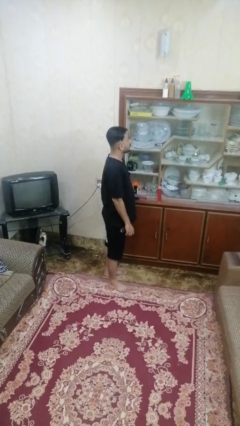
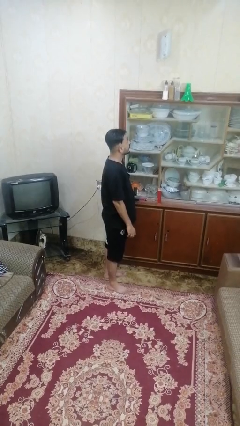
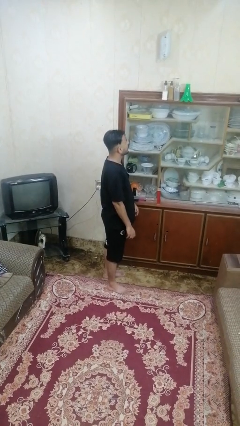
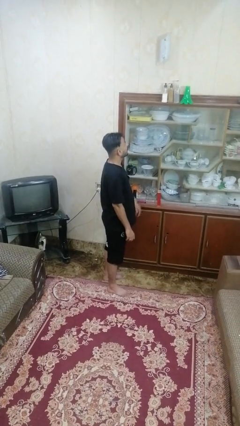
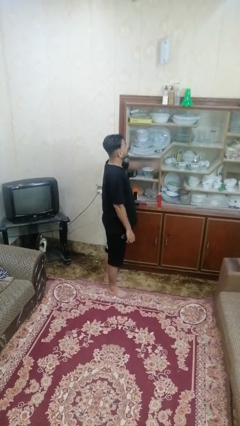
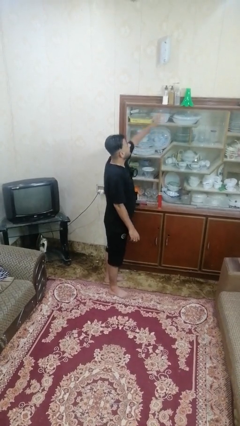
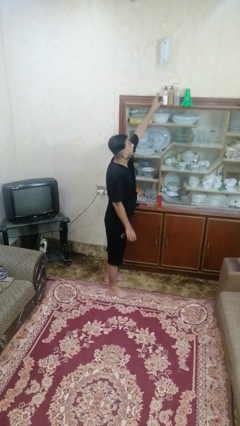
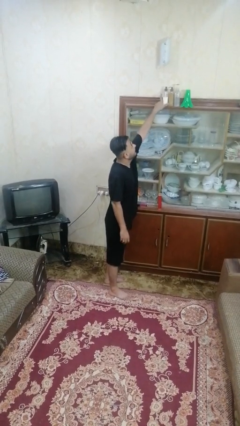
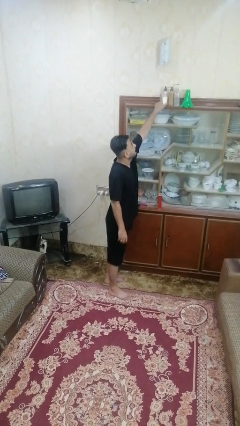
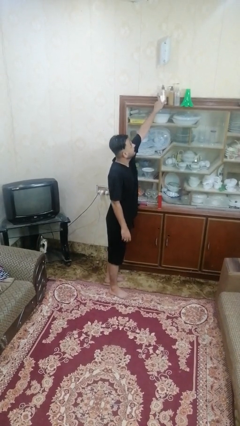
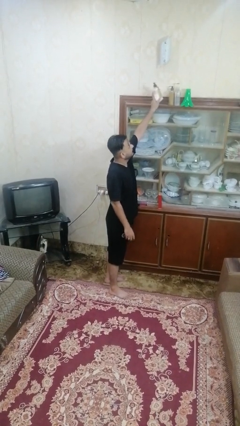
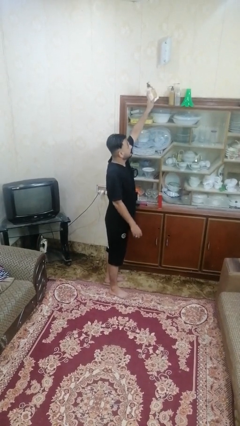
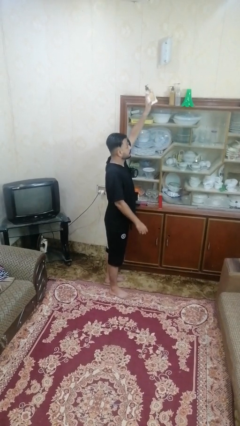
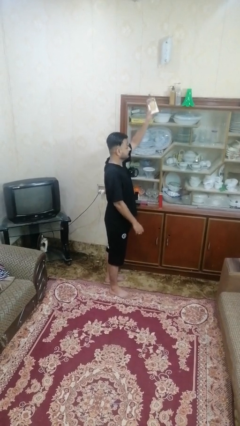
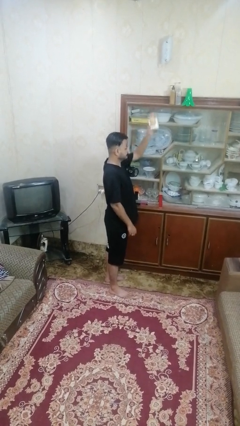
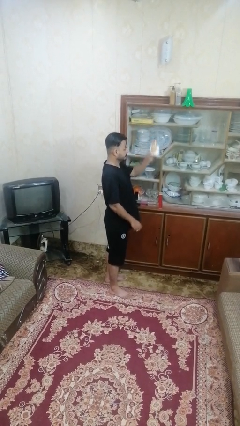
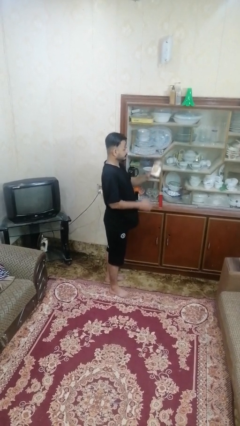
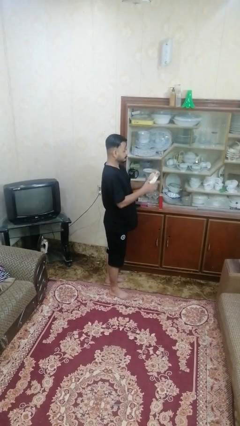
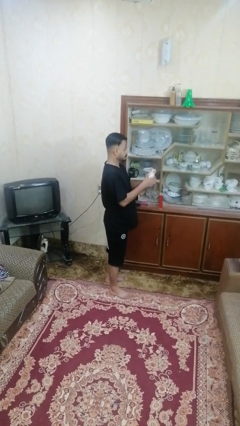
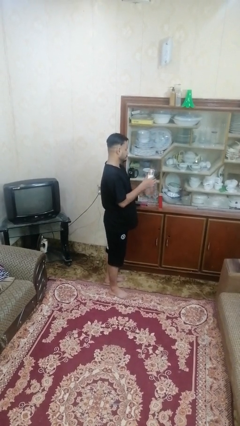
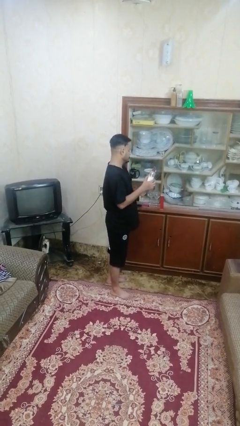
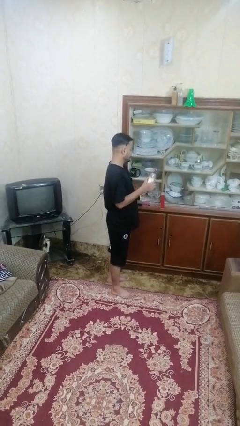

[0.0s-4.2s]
person picks up object from shelf

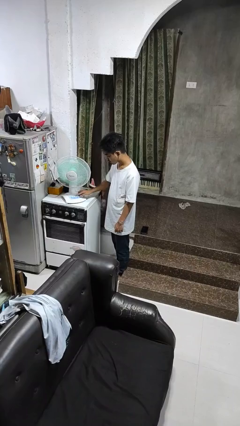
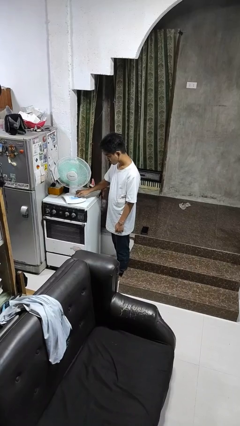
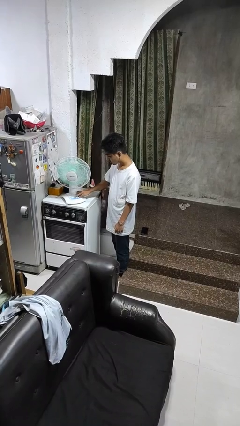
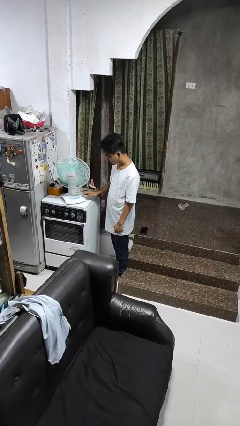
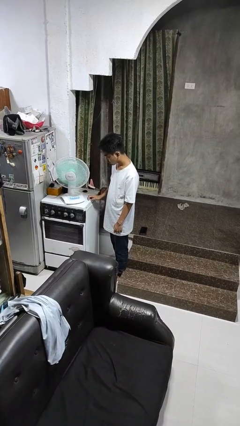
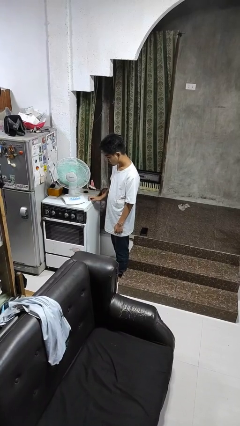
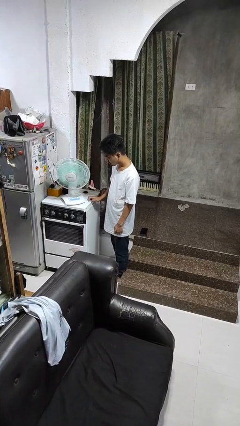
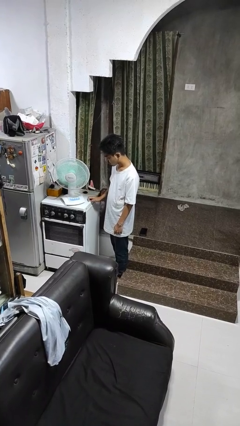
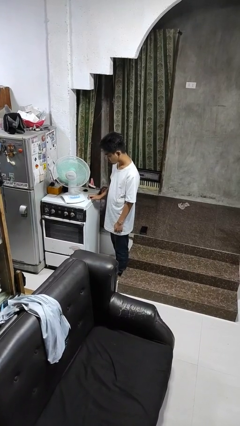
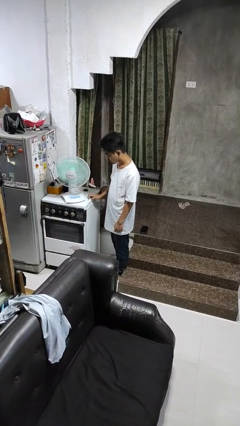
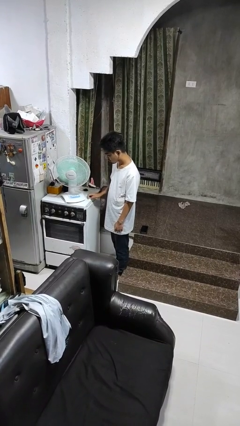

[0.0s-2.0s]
person turns on fan

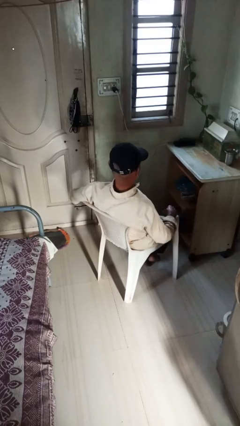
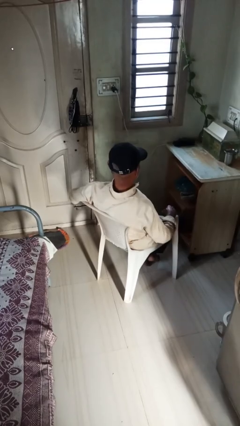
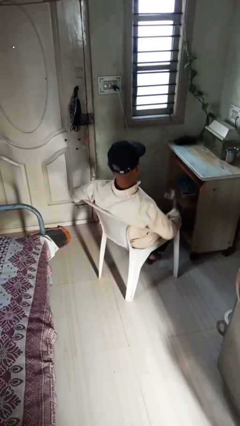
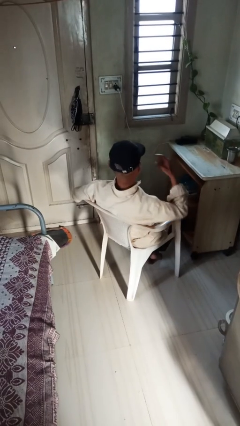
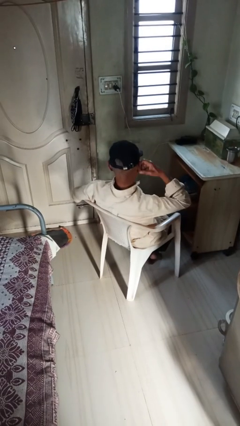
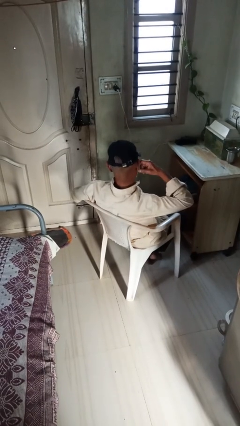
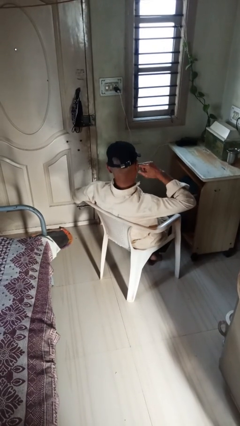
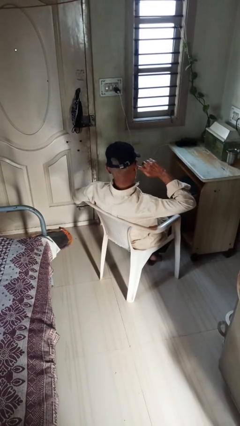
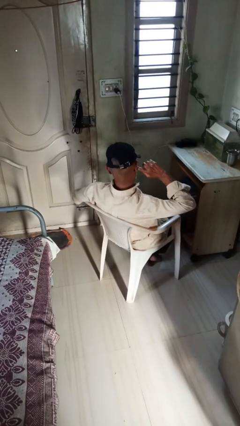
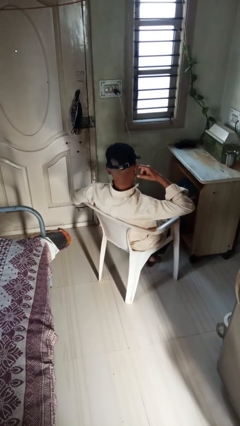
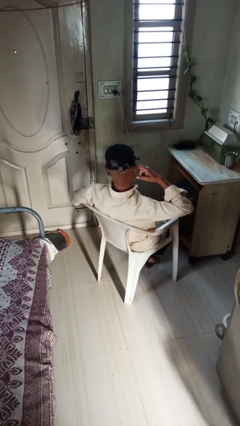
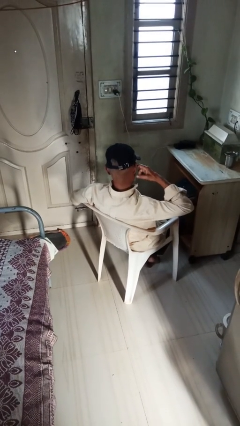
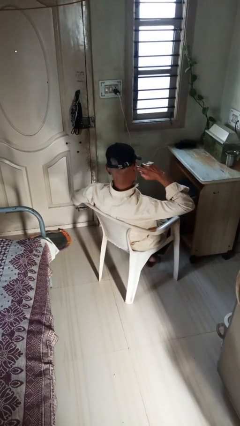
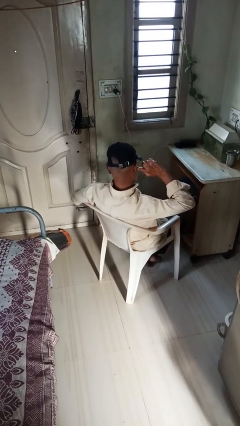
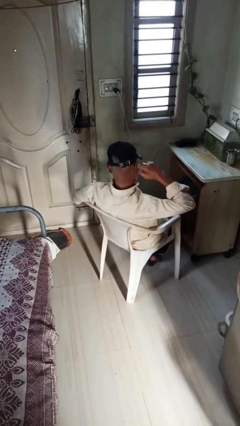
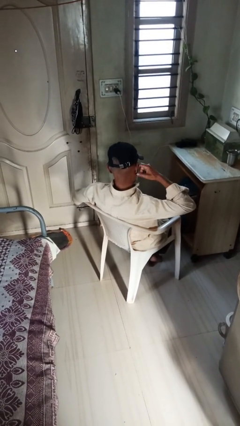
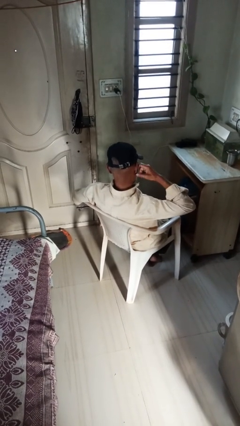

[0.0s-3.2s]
person puts fingers in ear

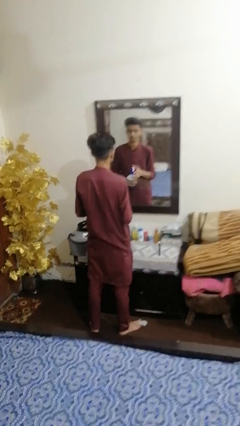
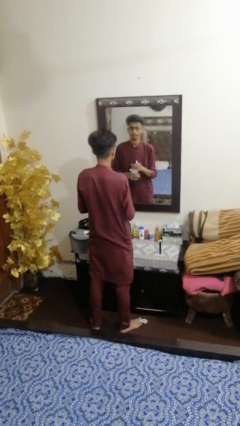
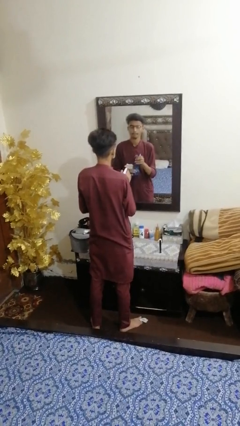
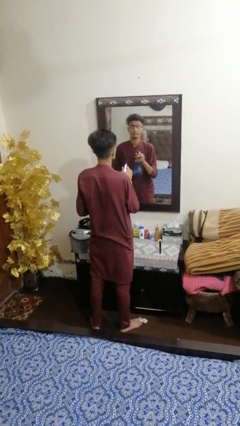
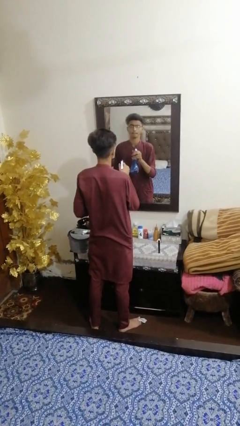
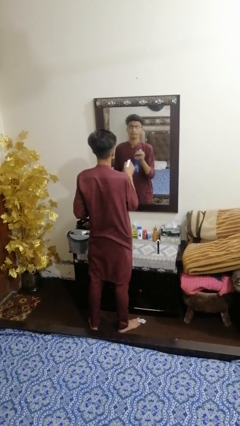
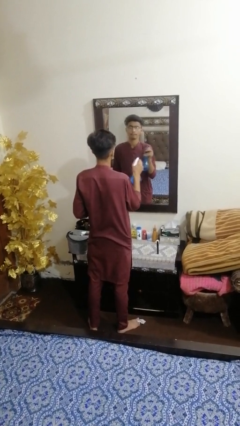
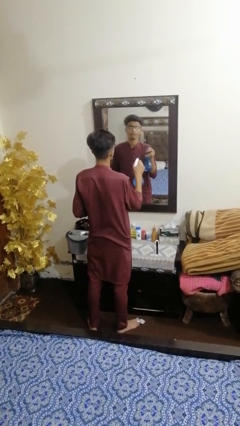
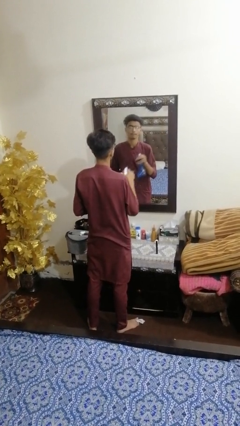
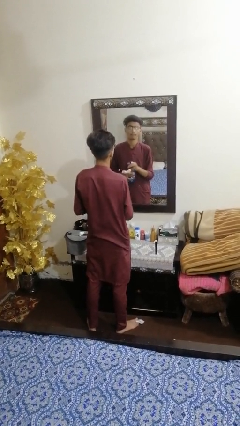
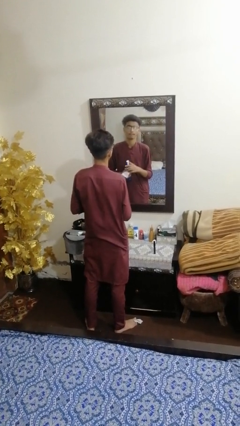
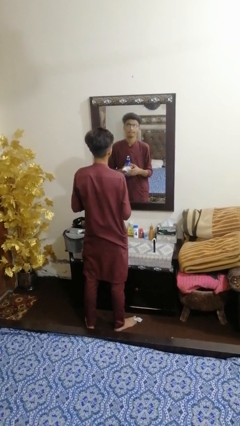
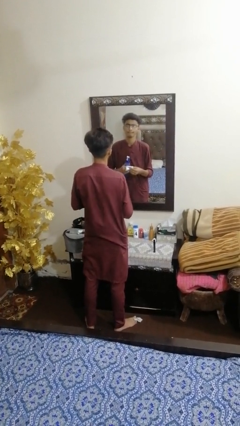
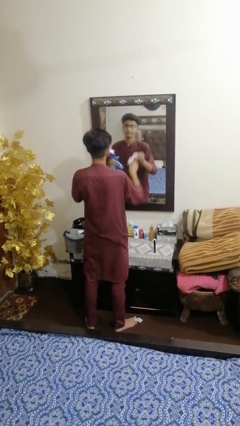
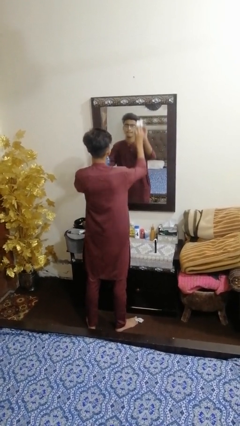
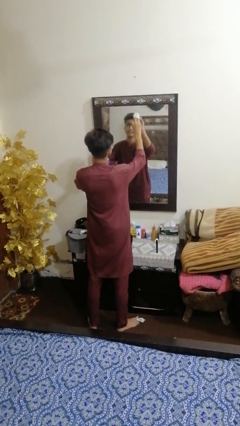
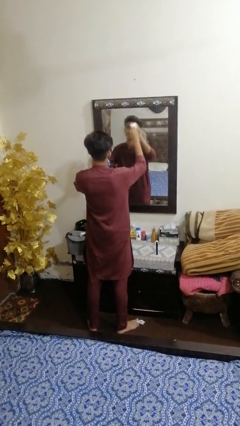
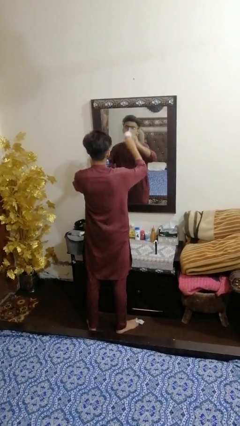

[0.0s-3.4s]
person sprays from bottle

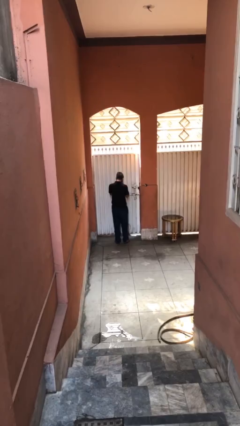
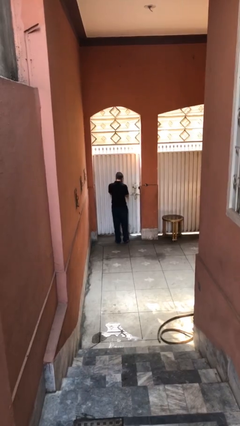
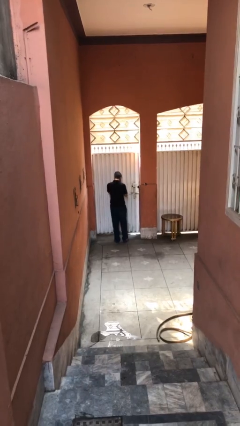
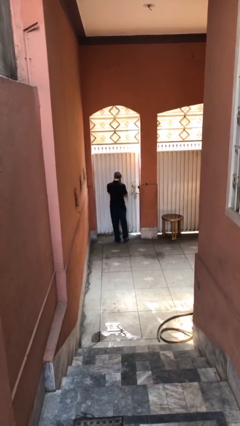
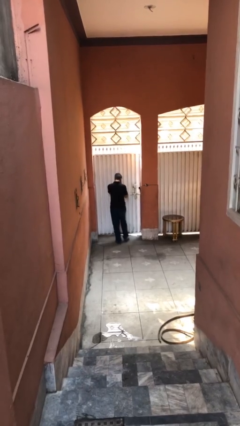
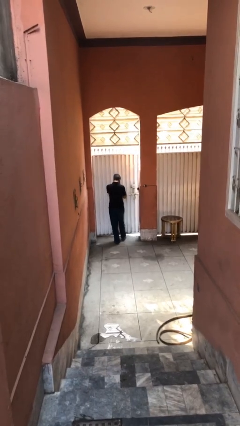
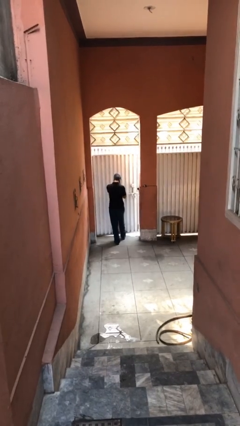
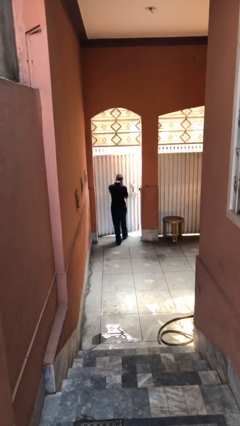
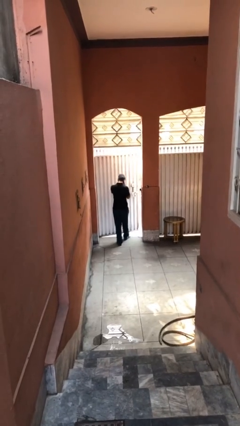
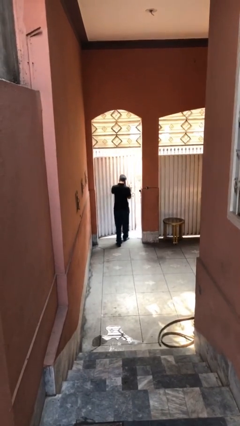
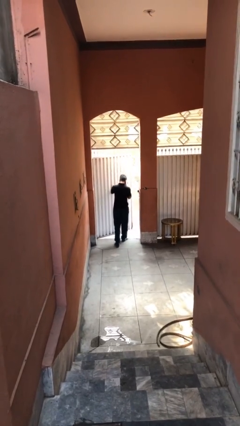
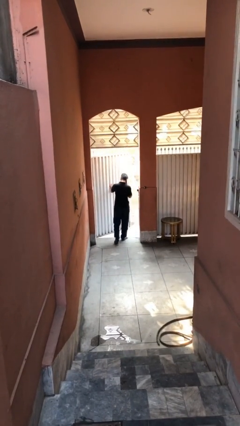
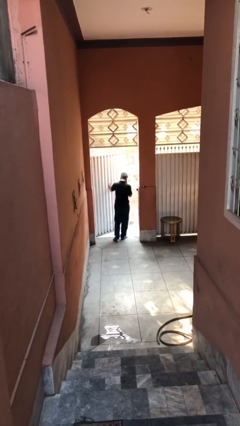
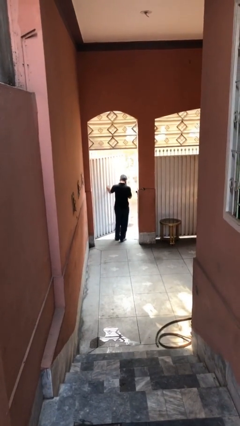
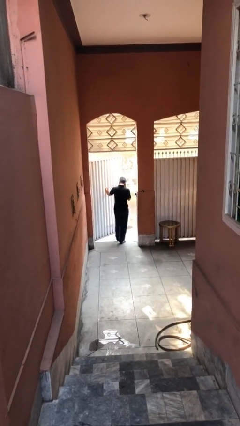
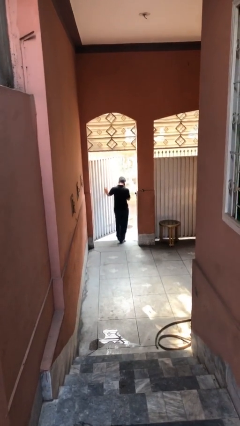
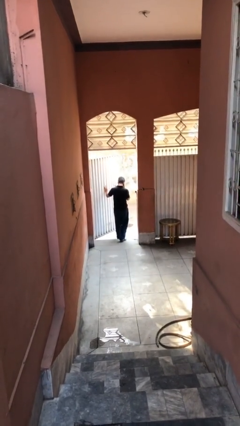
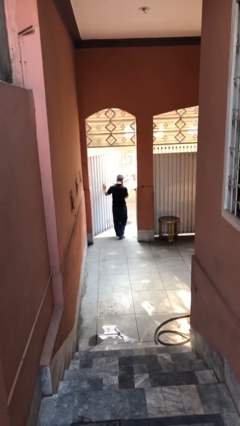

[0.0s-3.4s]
person opens facility door

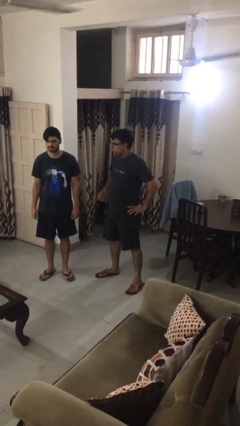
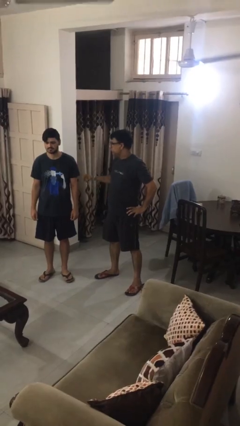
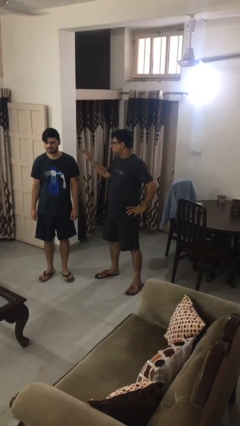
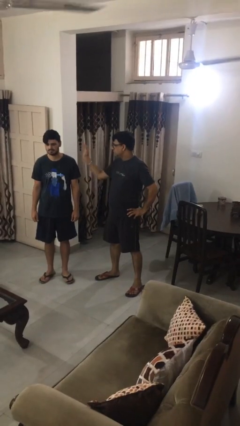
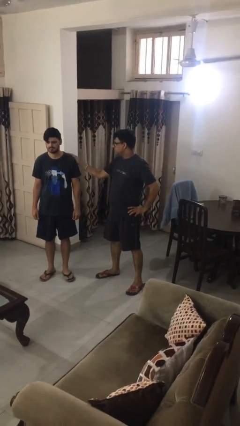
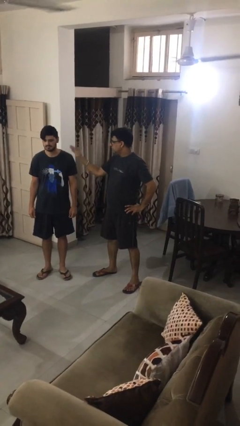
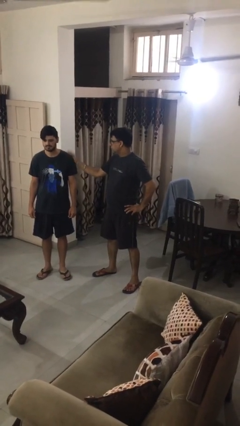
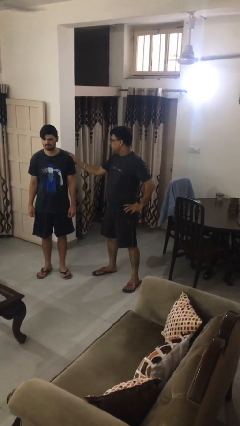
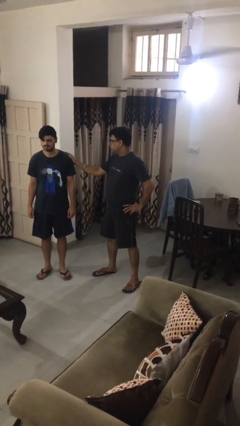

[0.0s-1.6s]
person pounds shoulders of person
